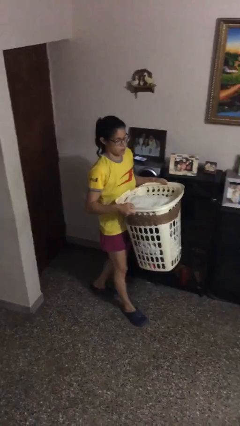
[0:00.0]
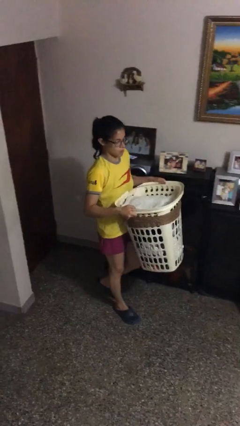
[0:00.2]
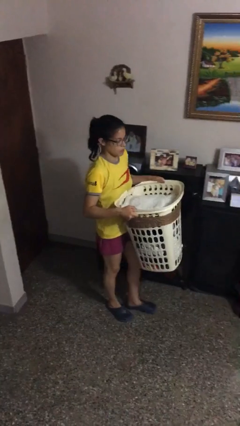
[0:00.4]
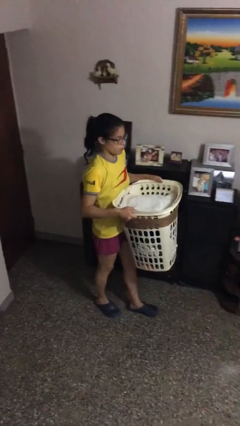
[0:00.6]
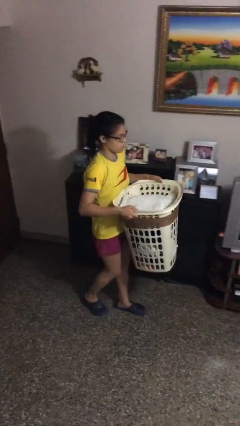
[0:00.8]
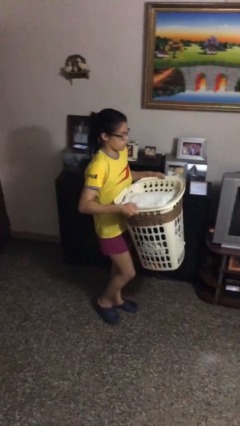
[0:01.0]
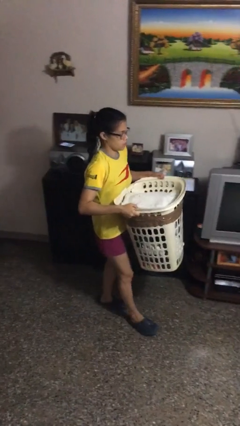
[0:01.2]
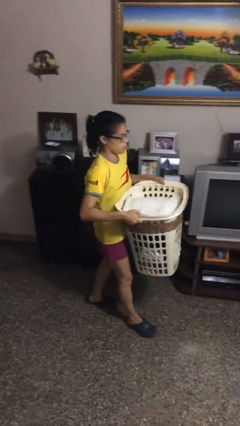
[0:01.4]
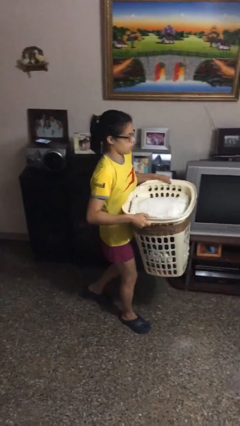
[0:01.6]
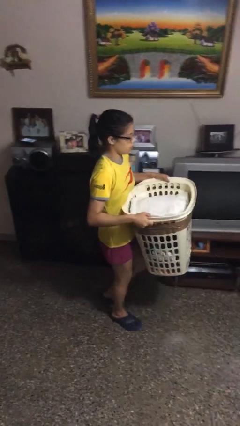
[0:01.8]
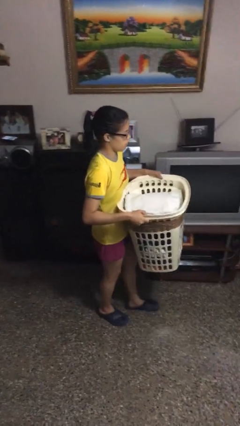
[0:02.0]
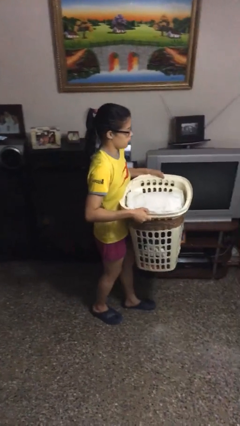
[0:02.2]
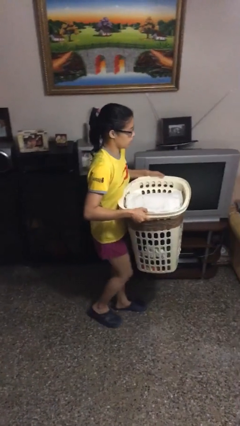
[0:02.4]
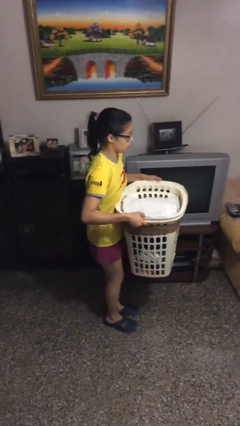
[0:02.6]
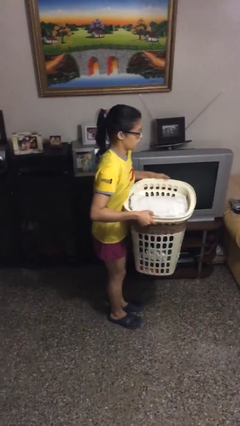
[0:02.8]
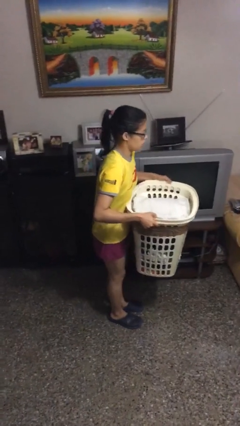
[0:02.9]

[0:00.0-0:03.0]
person carries heavy object

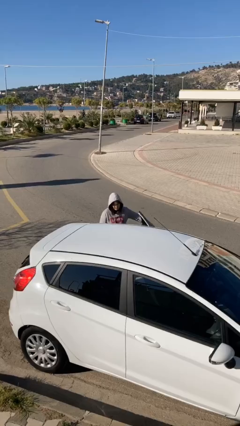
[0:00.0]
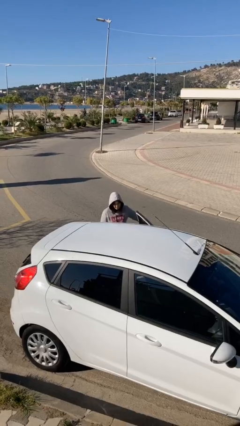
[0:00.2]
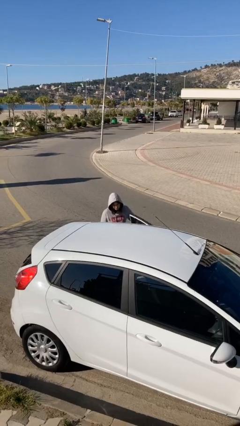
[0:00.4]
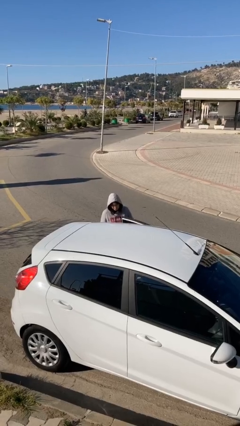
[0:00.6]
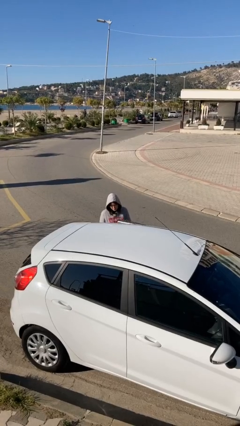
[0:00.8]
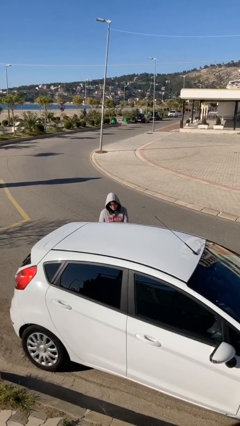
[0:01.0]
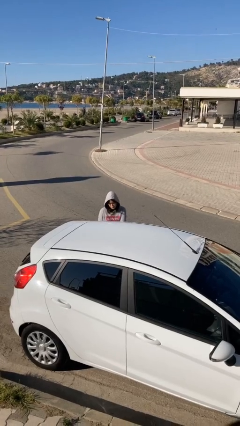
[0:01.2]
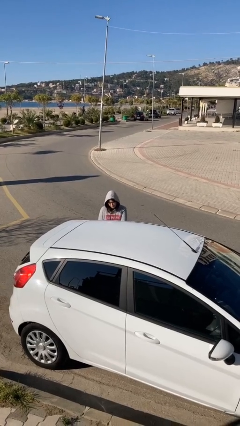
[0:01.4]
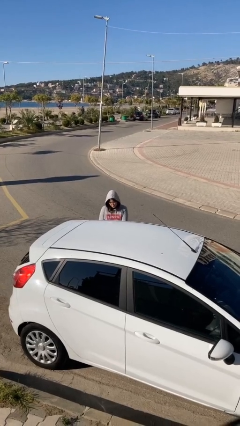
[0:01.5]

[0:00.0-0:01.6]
person closes car door

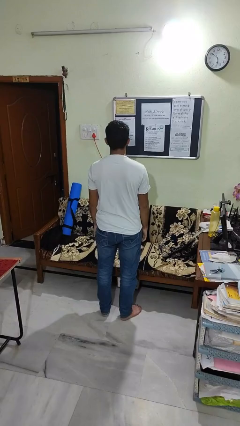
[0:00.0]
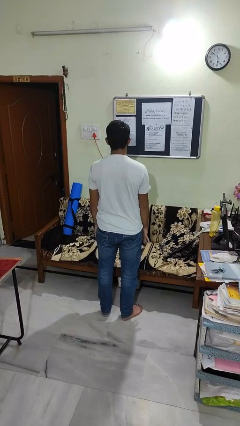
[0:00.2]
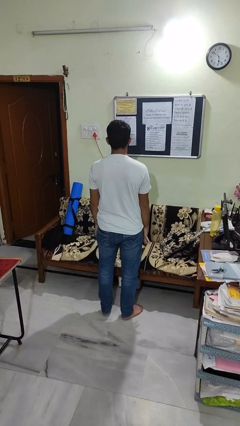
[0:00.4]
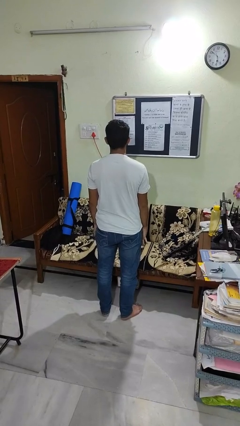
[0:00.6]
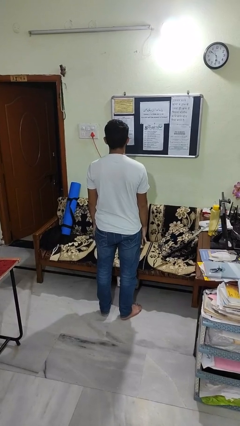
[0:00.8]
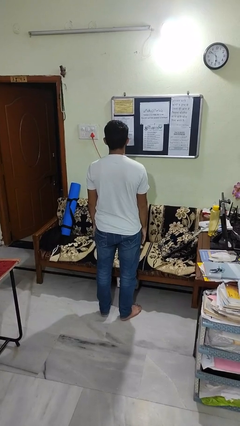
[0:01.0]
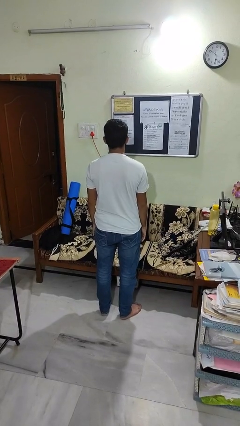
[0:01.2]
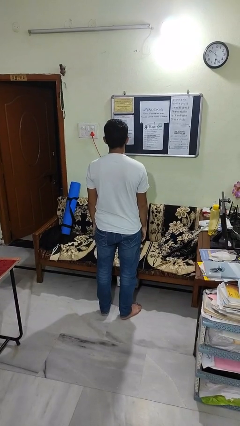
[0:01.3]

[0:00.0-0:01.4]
person gestures number three

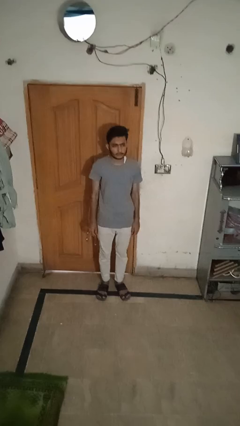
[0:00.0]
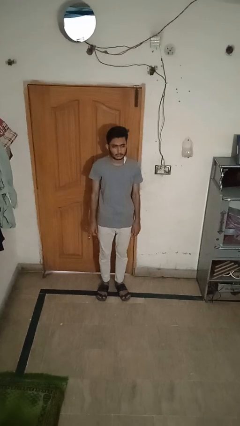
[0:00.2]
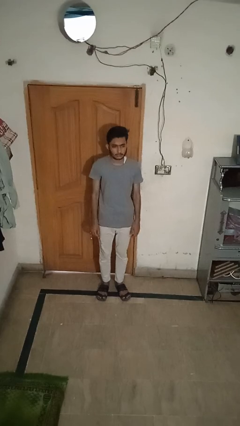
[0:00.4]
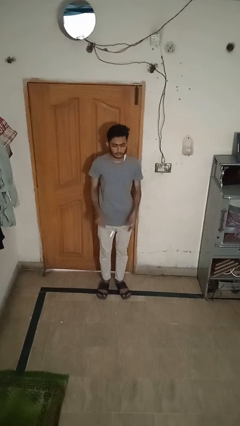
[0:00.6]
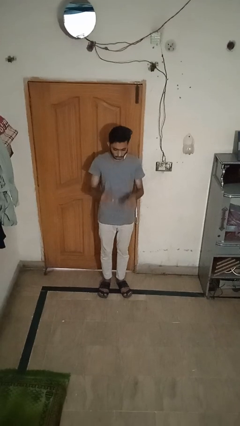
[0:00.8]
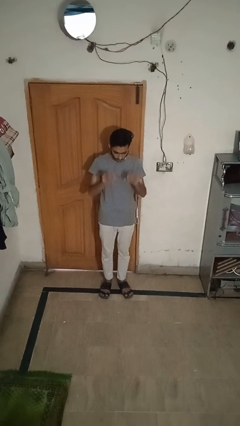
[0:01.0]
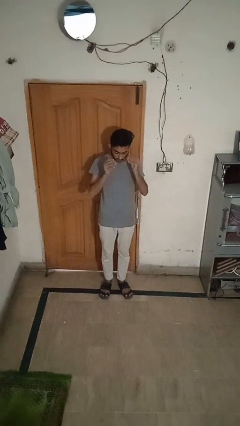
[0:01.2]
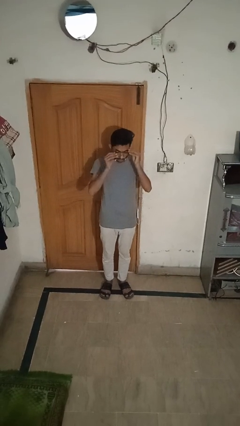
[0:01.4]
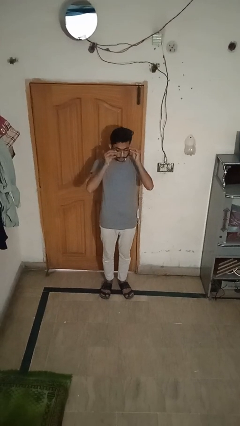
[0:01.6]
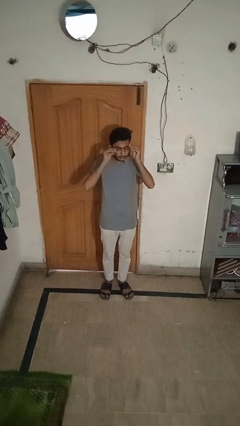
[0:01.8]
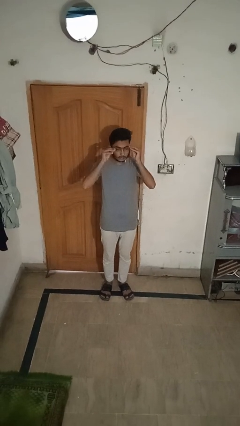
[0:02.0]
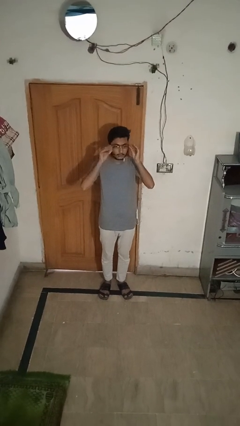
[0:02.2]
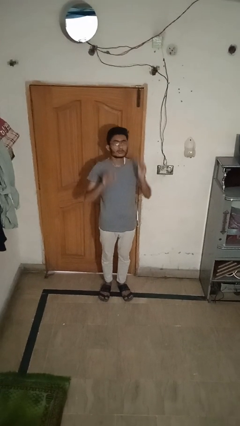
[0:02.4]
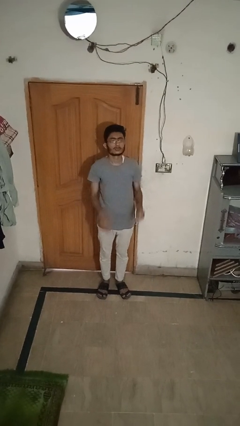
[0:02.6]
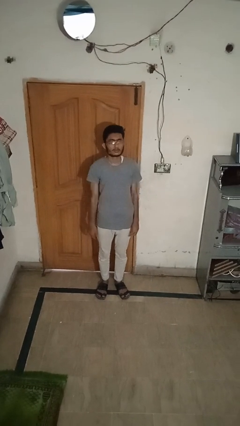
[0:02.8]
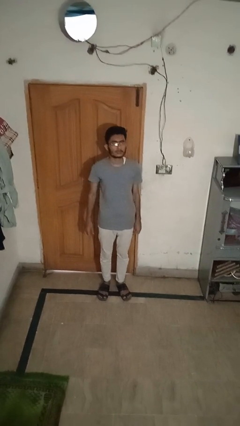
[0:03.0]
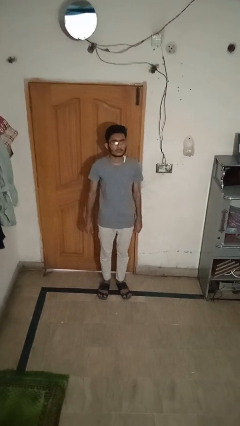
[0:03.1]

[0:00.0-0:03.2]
person puts on glasses

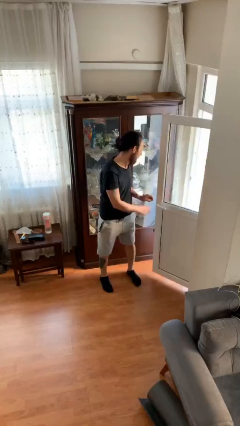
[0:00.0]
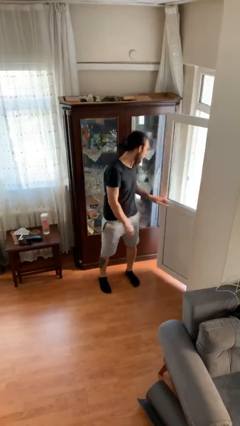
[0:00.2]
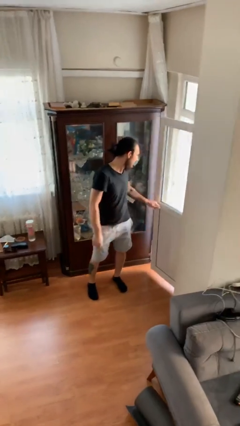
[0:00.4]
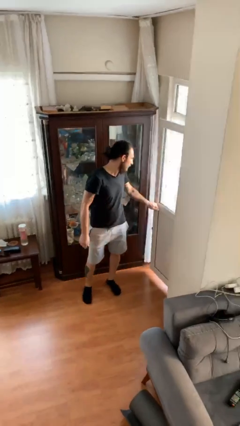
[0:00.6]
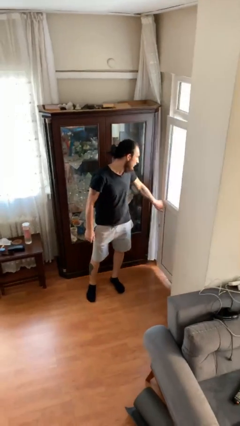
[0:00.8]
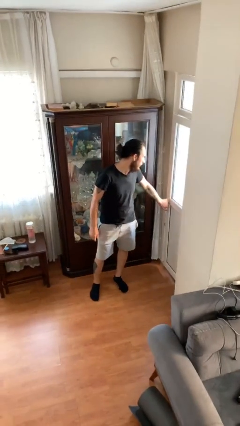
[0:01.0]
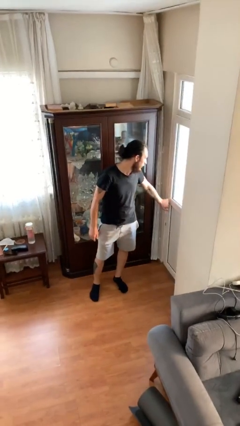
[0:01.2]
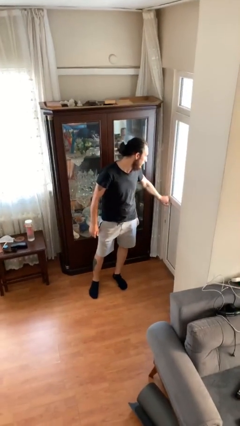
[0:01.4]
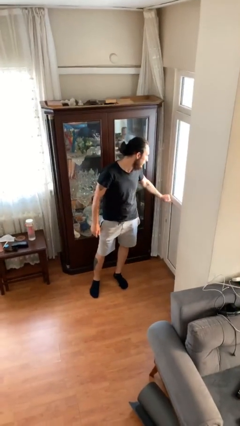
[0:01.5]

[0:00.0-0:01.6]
person closes facility door

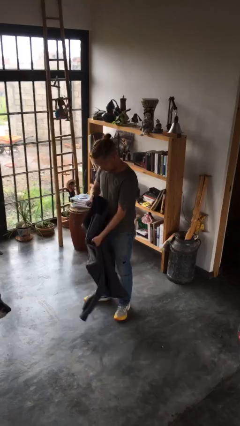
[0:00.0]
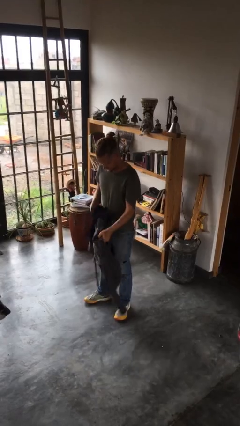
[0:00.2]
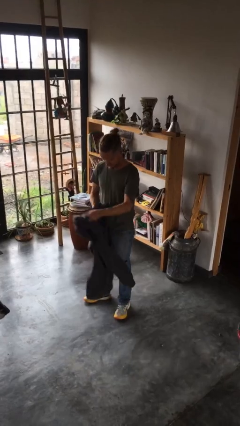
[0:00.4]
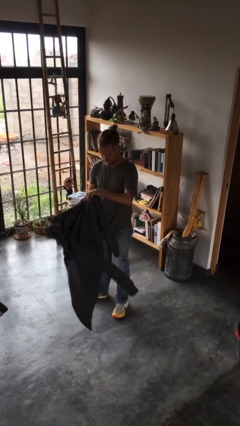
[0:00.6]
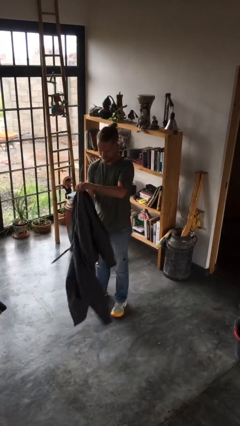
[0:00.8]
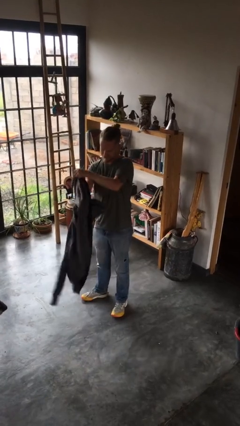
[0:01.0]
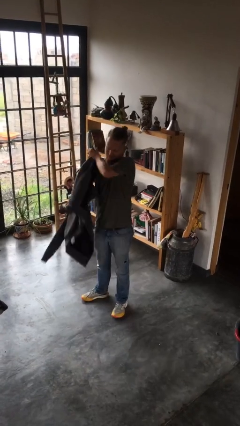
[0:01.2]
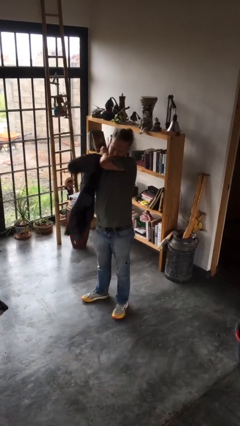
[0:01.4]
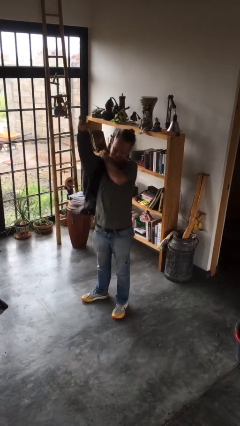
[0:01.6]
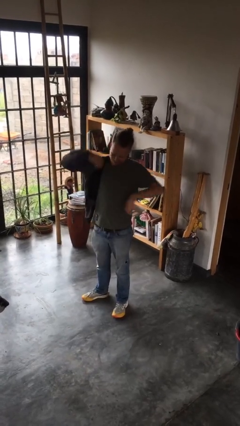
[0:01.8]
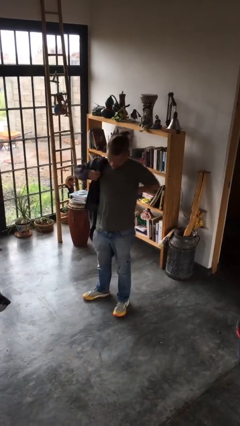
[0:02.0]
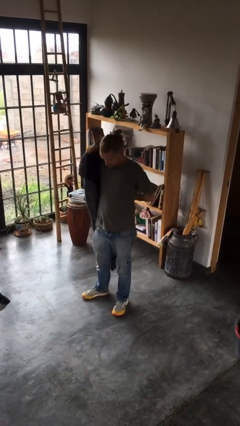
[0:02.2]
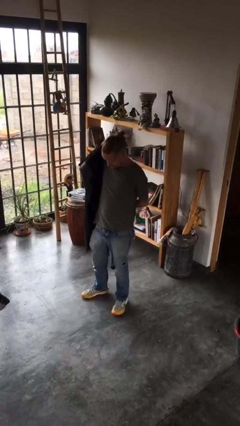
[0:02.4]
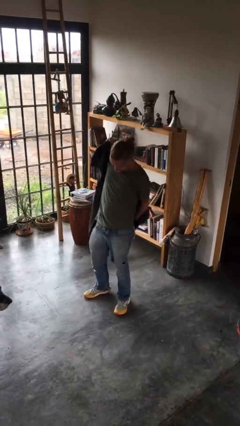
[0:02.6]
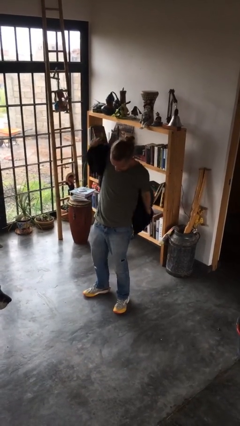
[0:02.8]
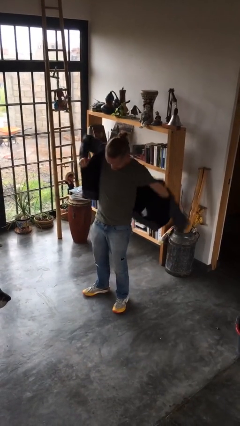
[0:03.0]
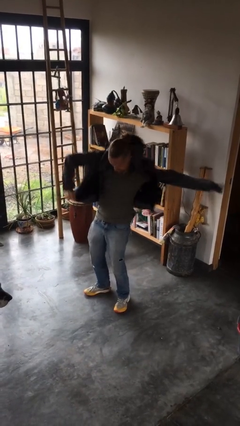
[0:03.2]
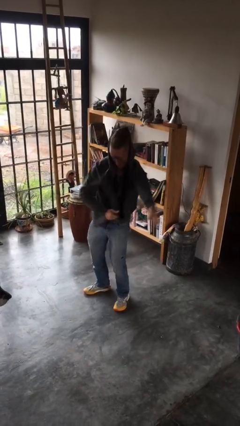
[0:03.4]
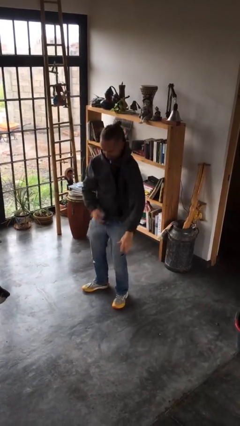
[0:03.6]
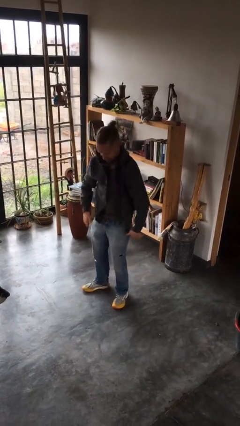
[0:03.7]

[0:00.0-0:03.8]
person puts on jacket

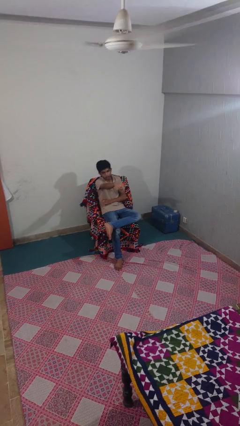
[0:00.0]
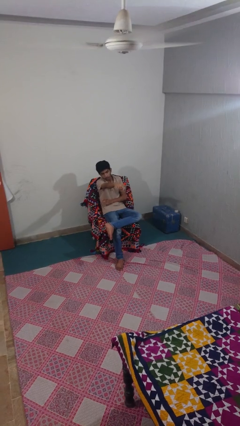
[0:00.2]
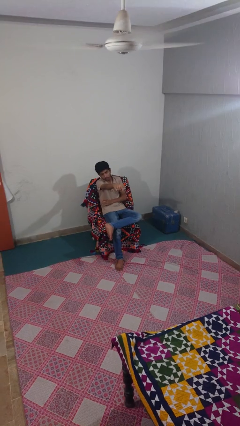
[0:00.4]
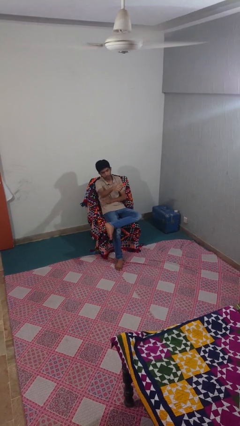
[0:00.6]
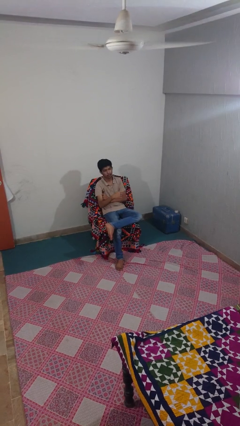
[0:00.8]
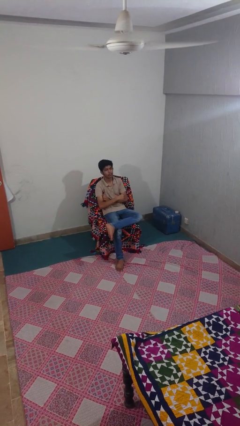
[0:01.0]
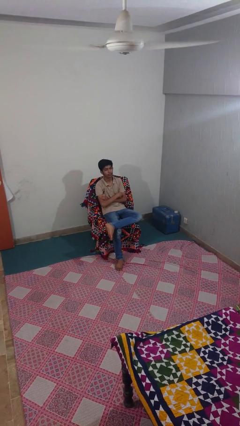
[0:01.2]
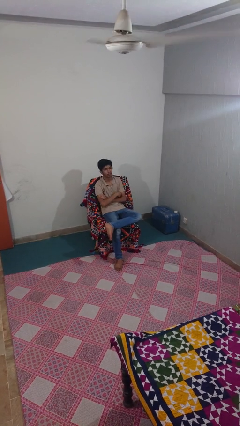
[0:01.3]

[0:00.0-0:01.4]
person points at person

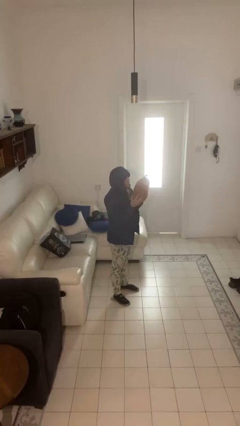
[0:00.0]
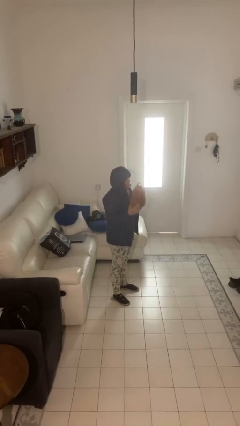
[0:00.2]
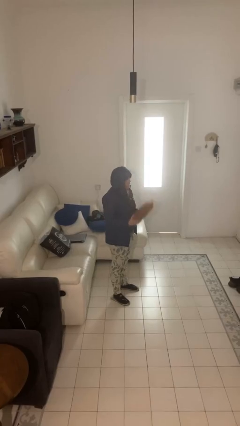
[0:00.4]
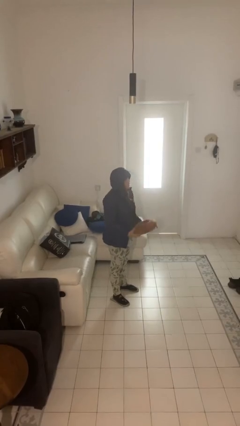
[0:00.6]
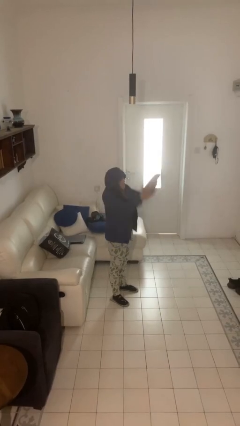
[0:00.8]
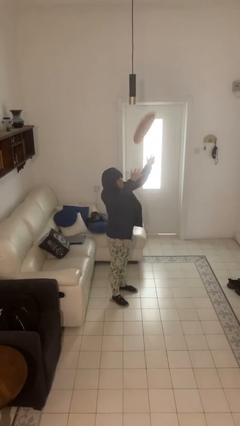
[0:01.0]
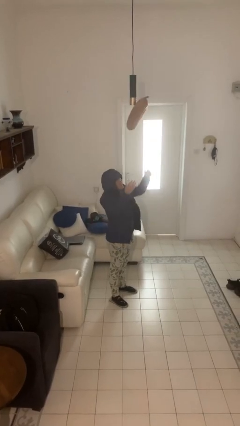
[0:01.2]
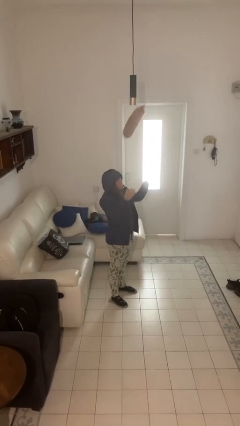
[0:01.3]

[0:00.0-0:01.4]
person drops object
